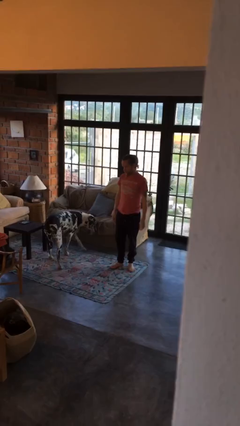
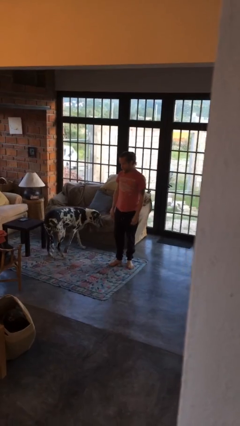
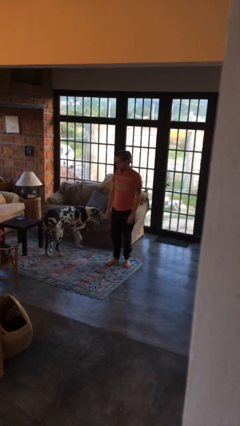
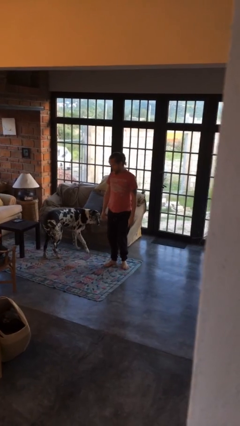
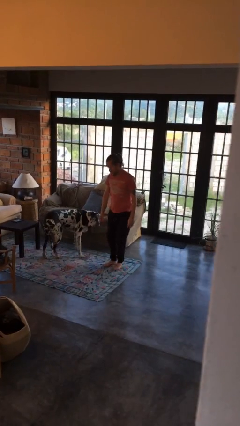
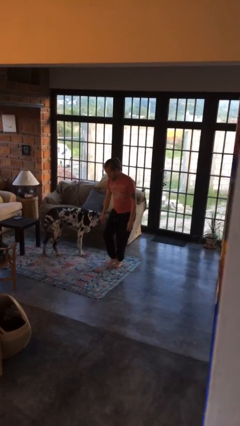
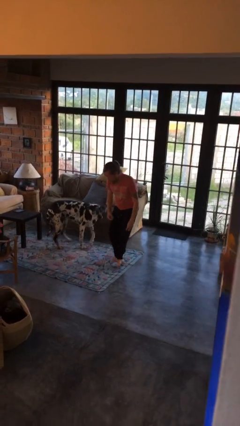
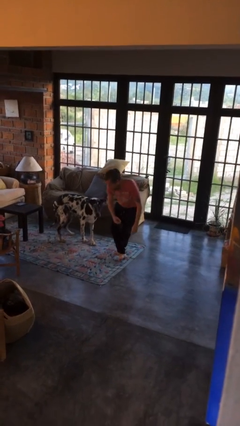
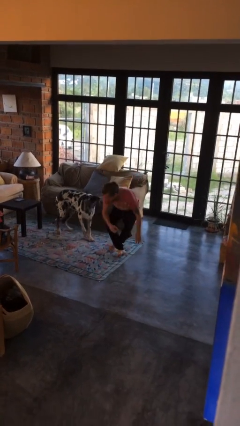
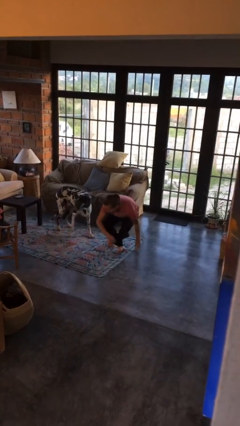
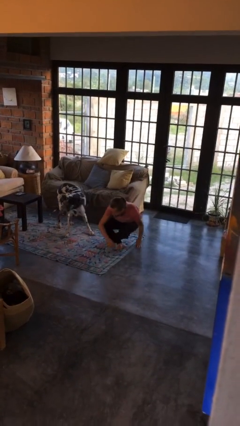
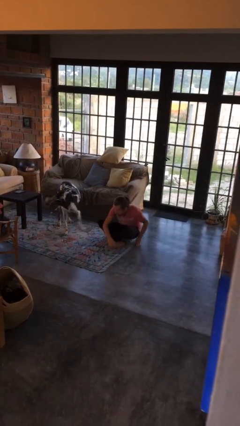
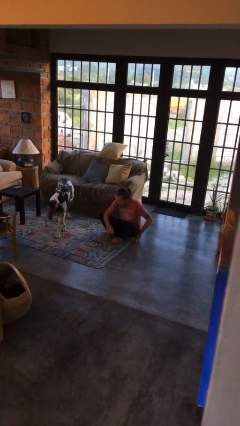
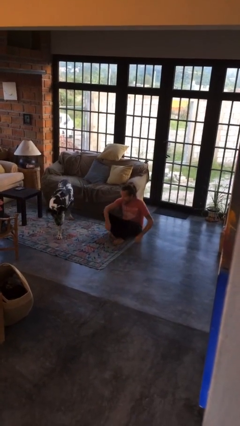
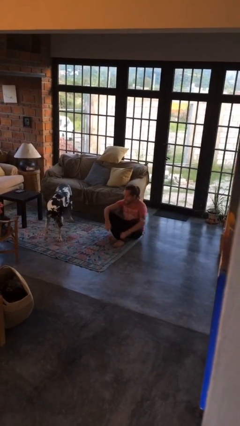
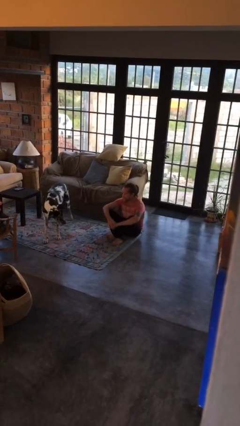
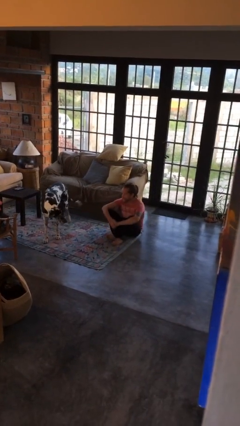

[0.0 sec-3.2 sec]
person sits crisscross

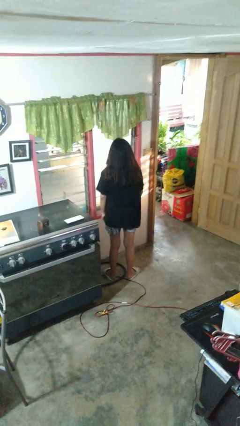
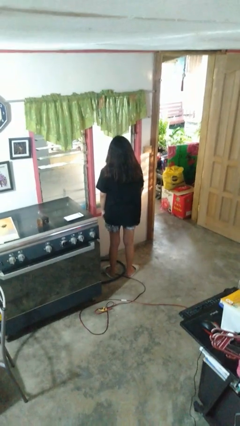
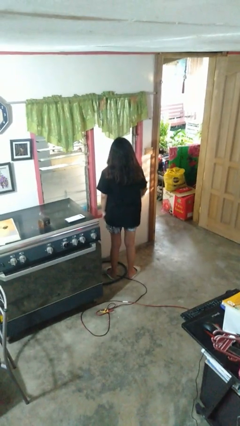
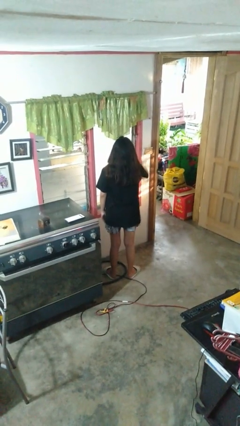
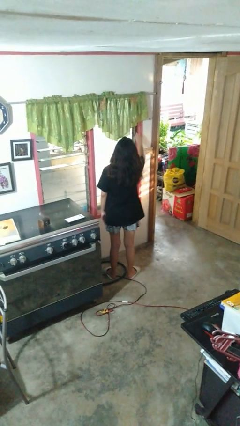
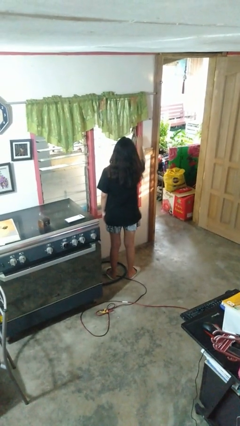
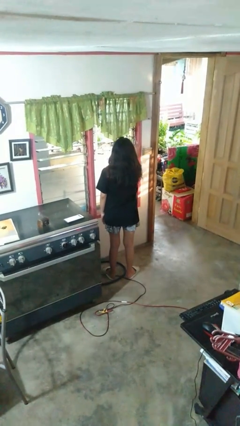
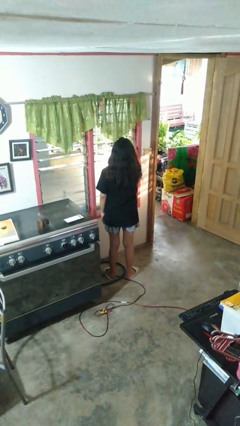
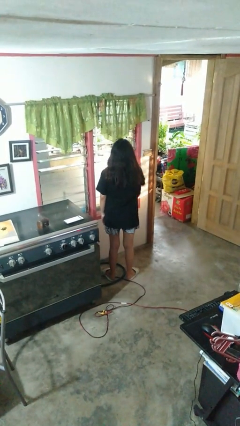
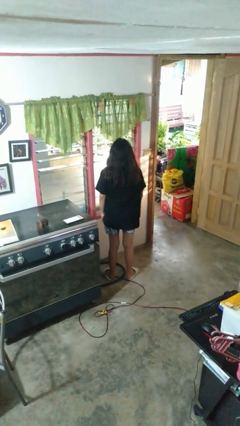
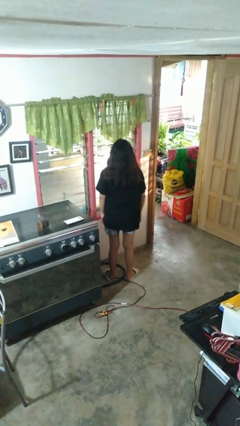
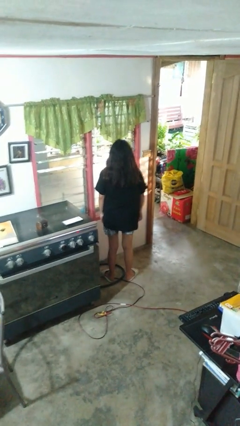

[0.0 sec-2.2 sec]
person opens home window

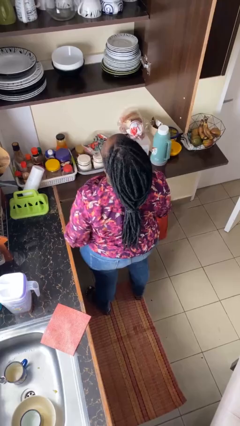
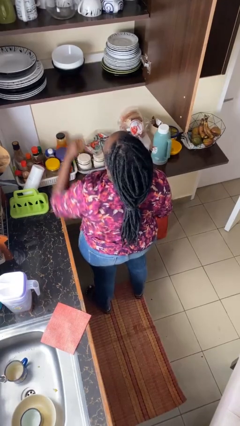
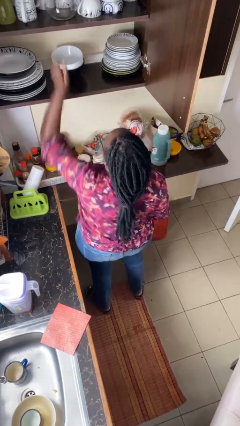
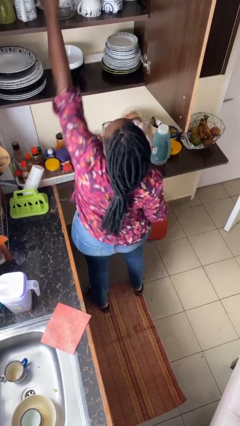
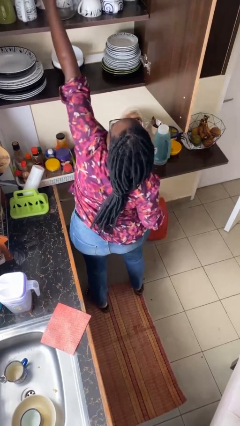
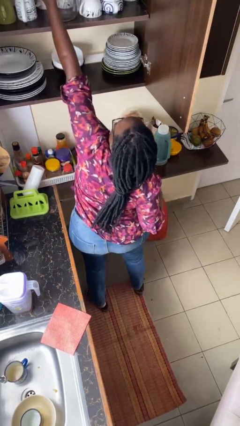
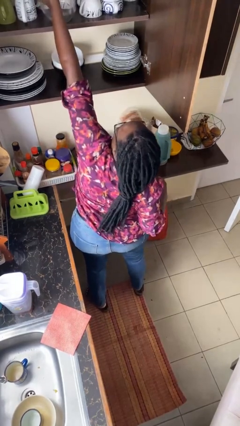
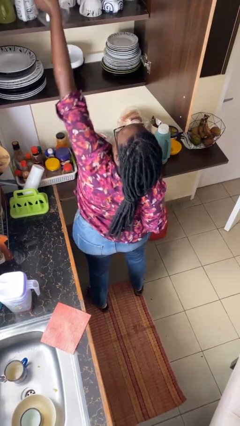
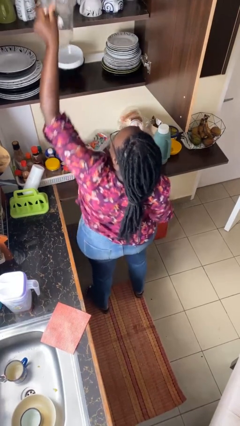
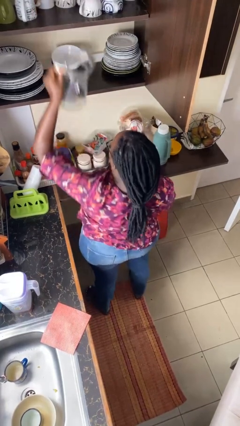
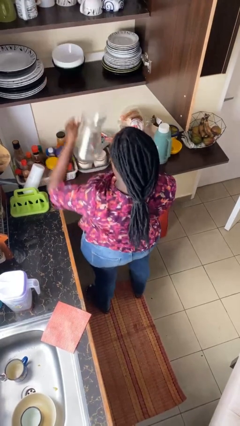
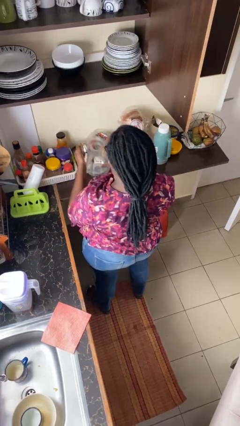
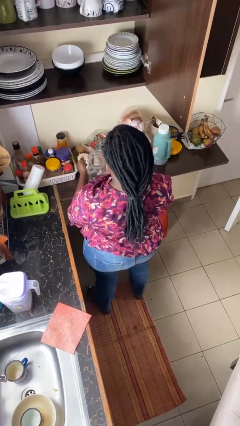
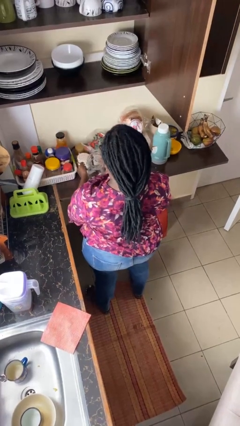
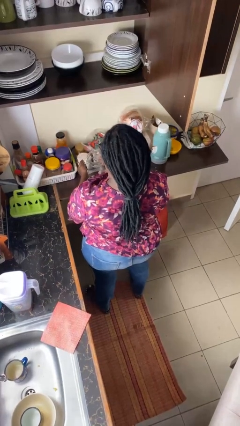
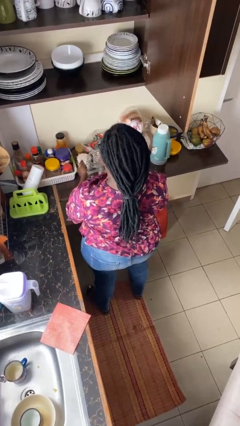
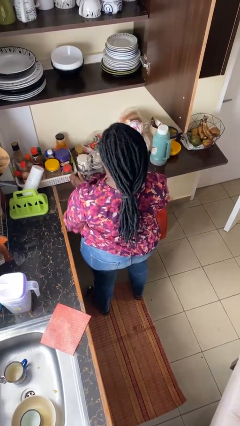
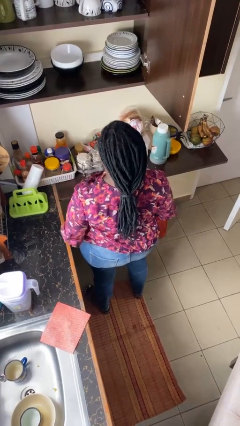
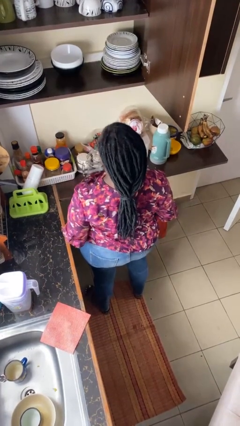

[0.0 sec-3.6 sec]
person takes object from cabinet

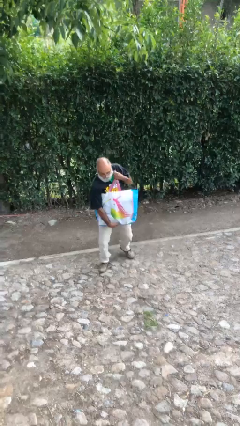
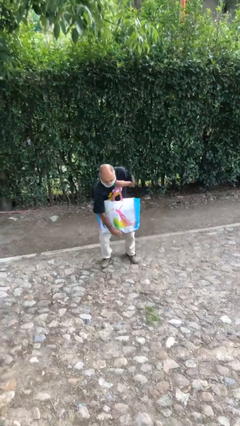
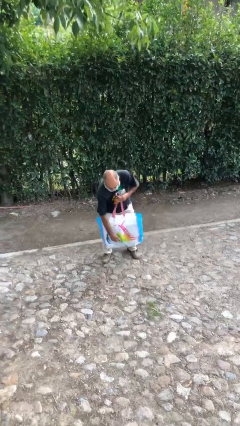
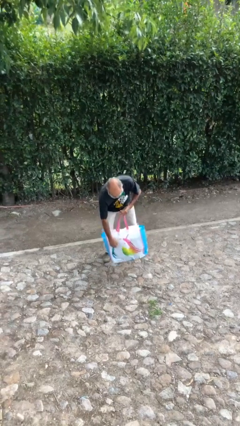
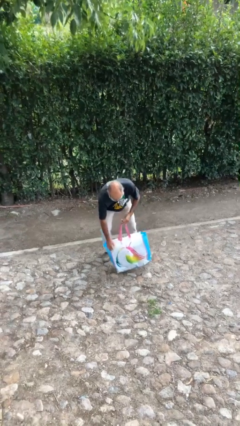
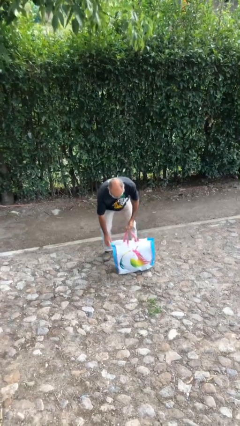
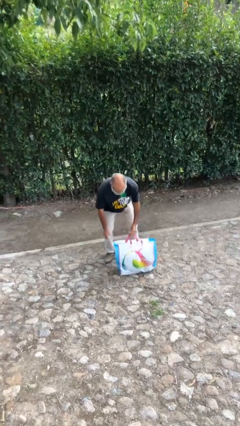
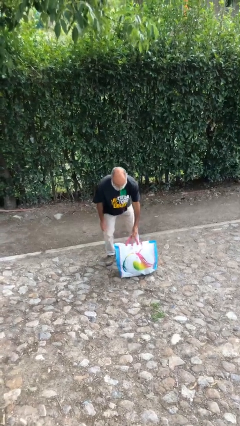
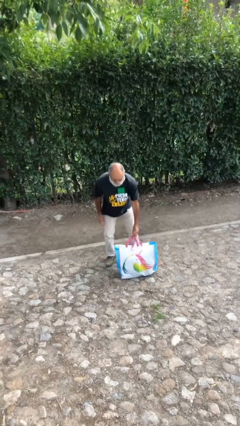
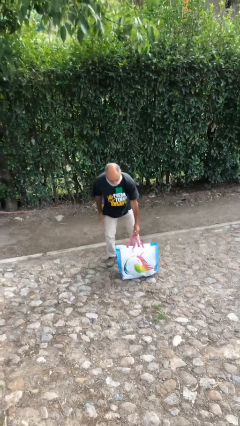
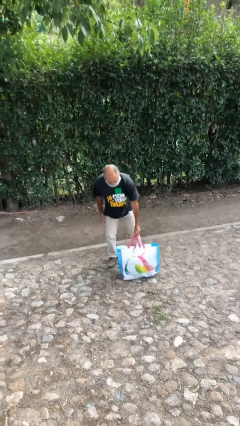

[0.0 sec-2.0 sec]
person puts down object on floor

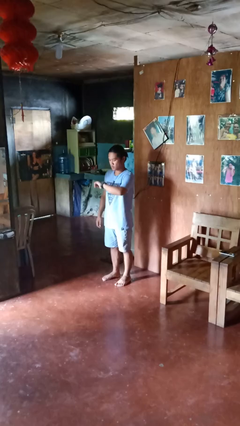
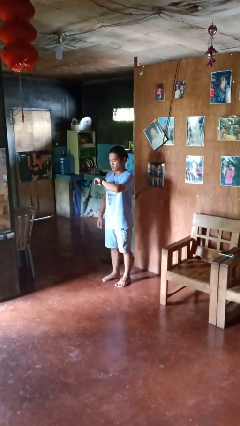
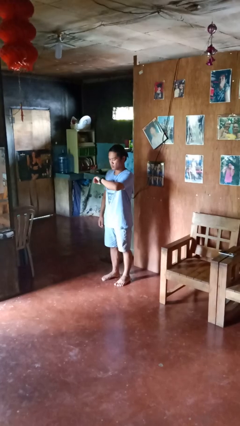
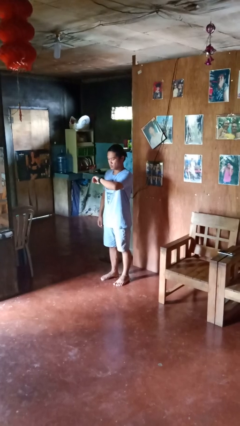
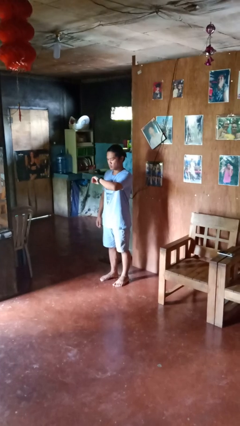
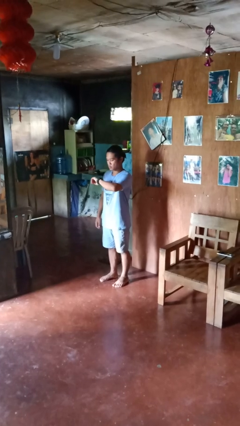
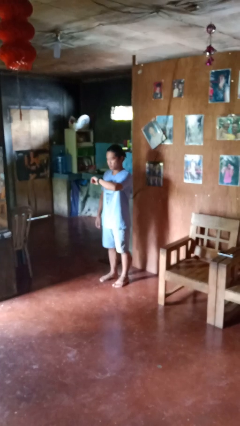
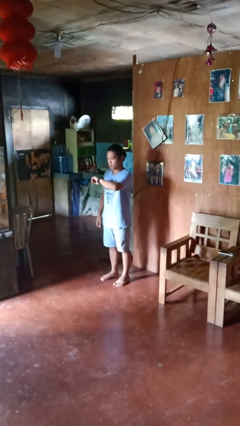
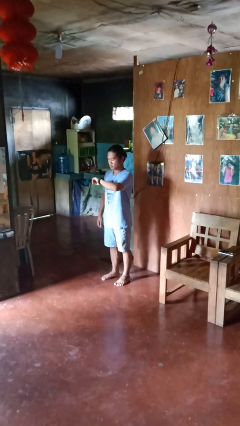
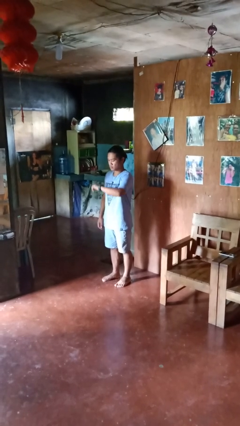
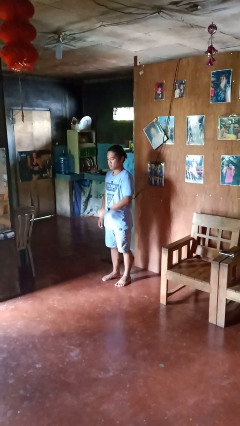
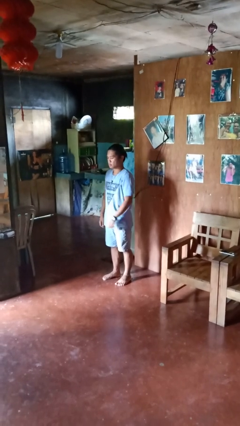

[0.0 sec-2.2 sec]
person looks at wristwatch

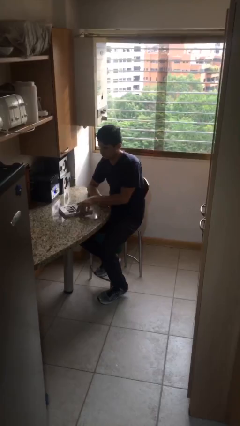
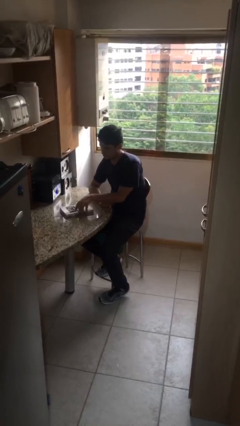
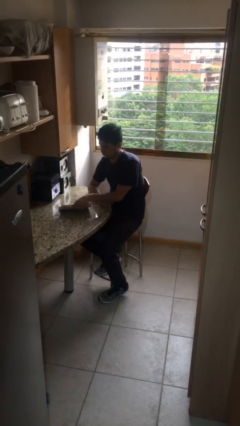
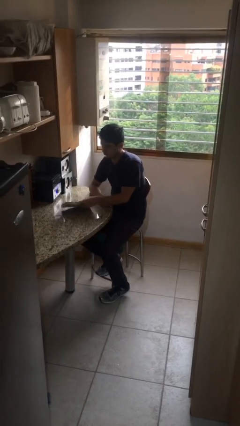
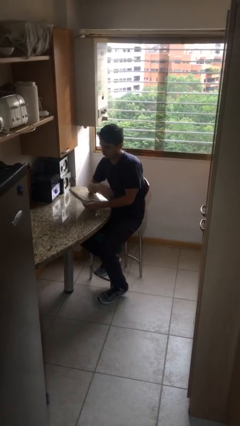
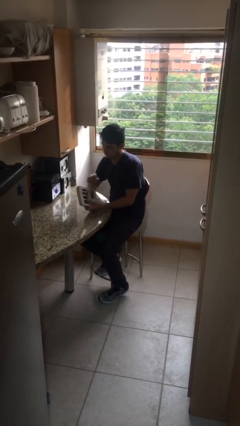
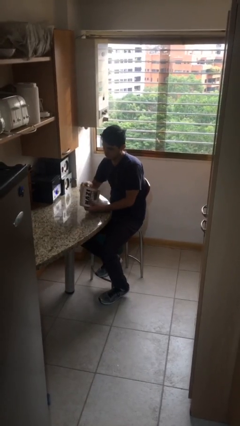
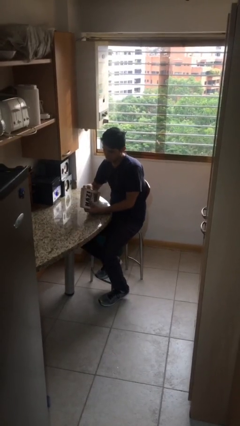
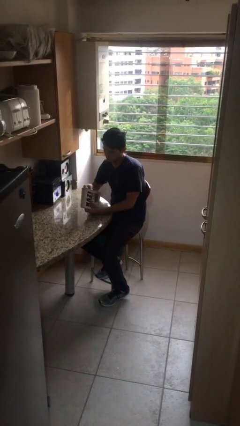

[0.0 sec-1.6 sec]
person picks up object from table

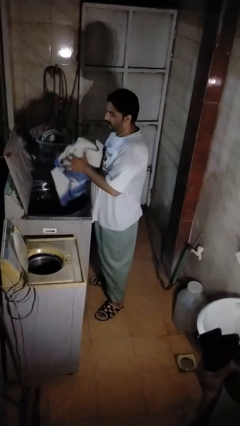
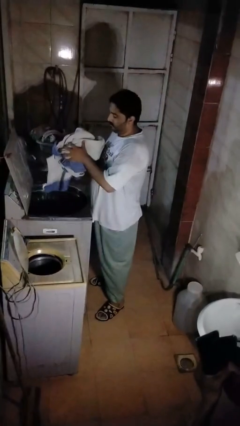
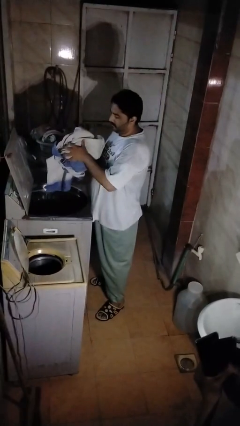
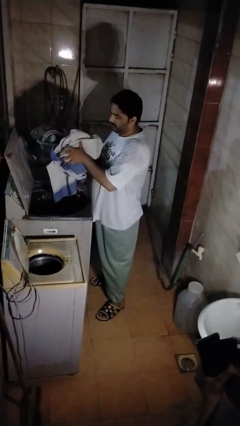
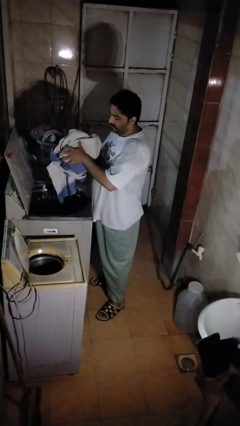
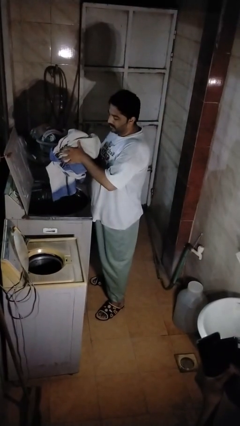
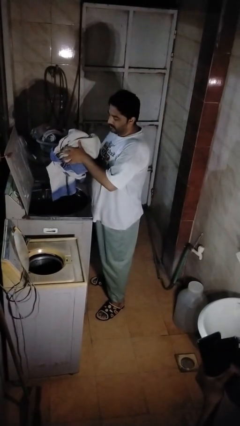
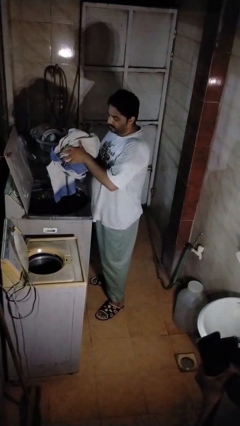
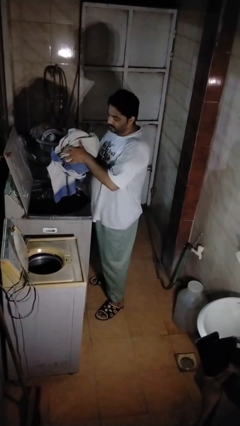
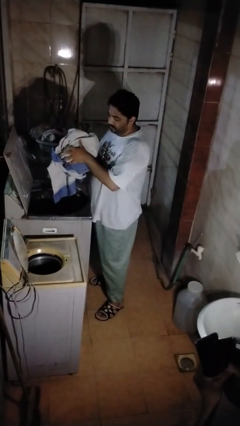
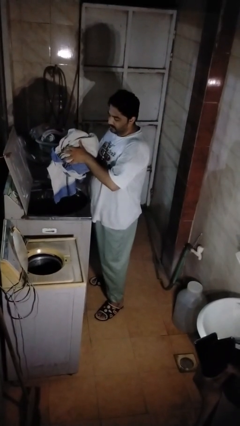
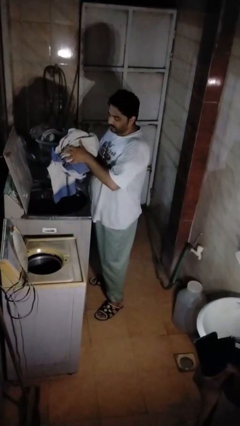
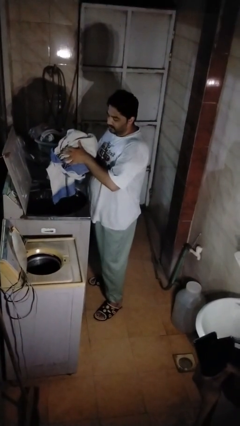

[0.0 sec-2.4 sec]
person unloads clotheswasher
